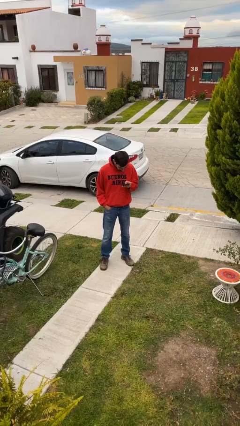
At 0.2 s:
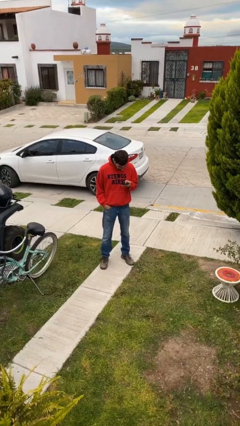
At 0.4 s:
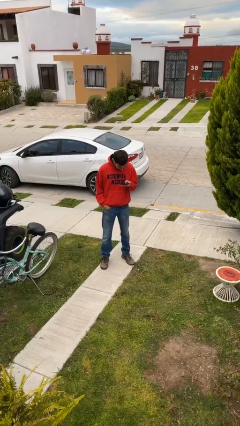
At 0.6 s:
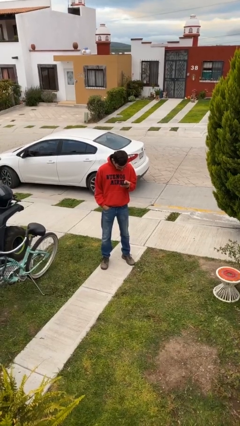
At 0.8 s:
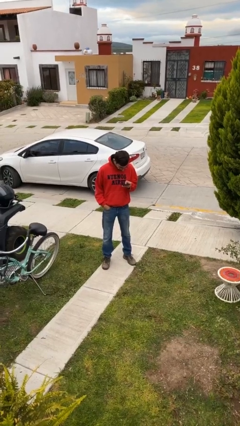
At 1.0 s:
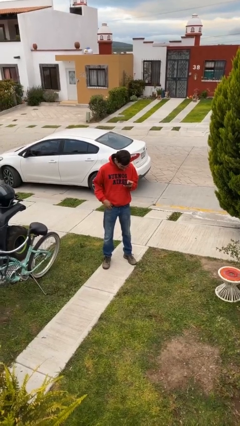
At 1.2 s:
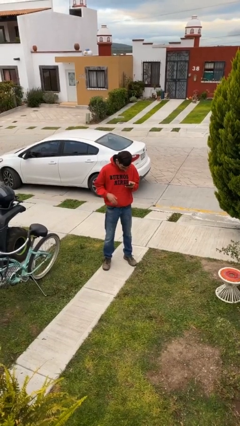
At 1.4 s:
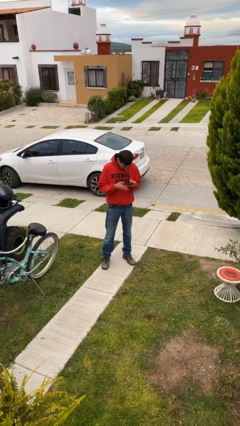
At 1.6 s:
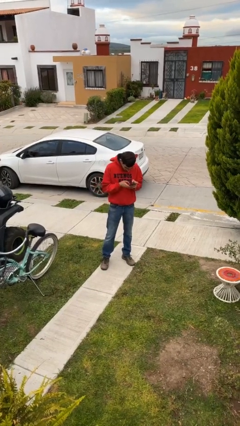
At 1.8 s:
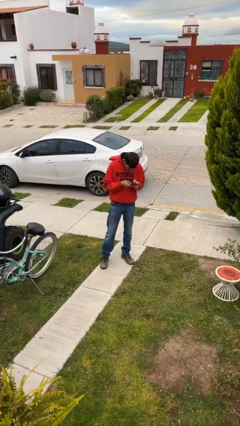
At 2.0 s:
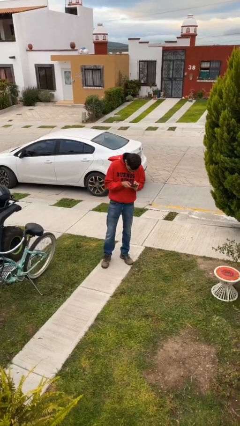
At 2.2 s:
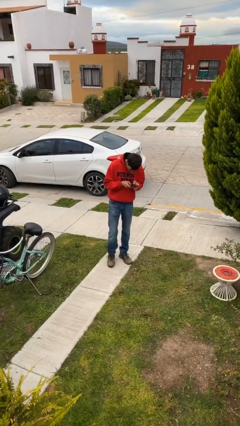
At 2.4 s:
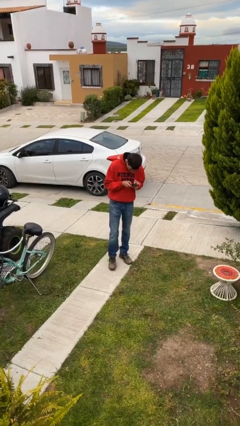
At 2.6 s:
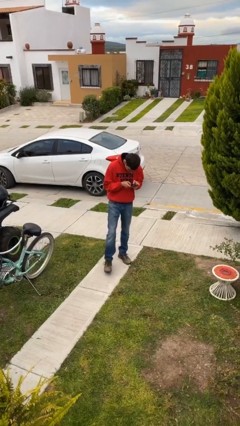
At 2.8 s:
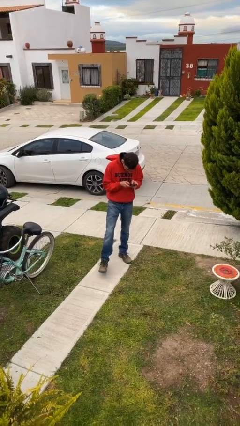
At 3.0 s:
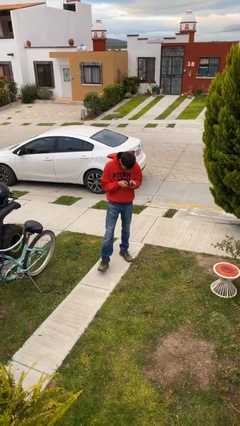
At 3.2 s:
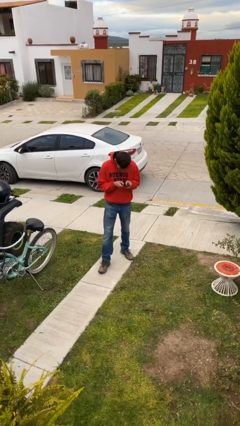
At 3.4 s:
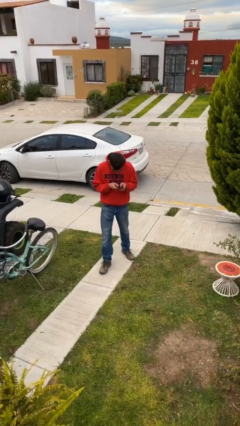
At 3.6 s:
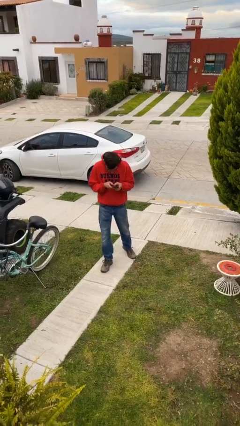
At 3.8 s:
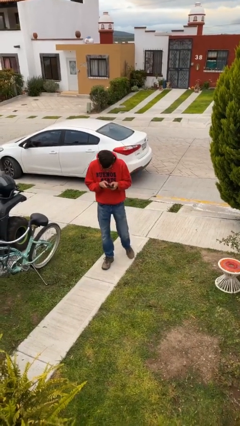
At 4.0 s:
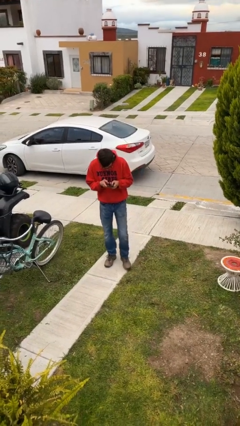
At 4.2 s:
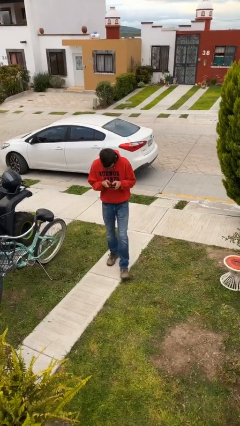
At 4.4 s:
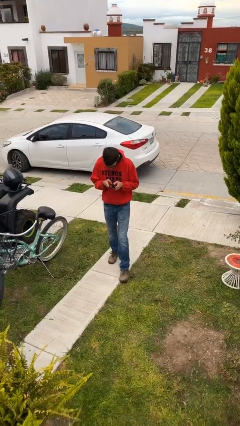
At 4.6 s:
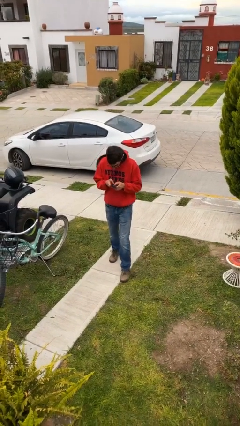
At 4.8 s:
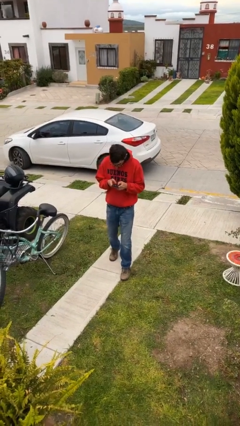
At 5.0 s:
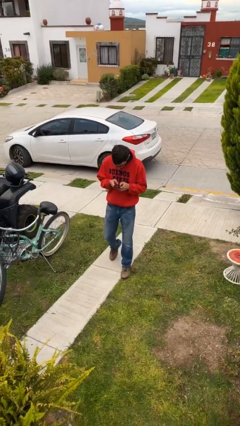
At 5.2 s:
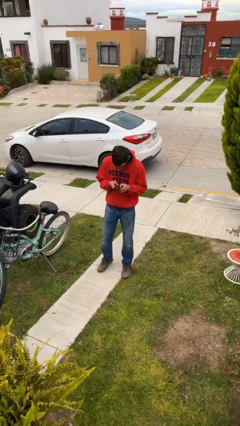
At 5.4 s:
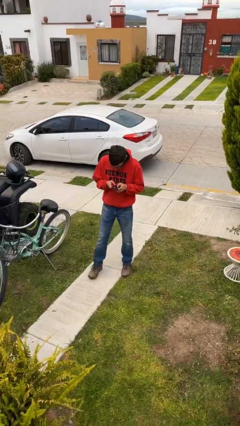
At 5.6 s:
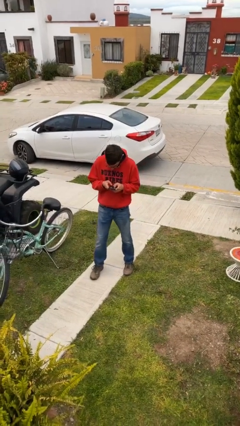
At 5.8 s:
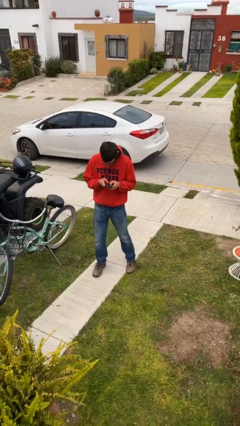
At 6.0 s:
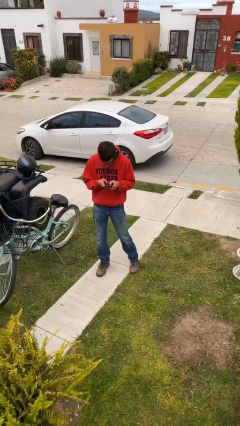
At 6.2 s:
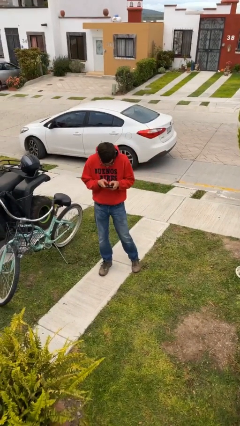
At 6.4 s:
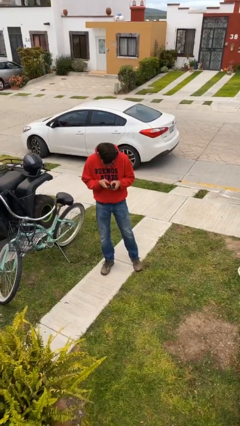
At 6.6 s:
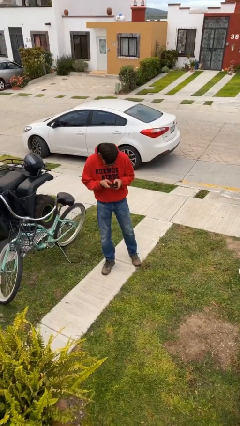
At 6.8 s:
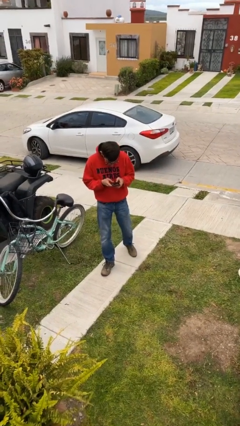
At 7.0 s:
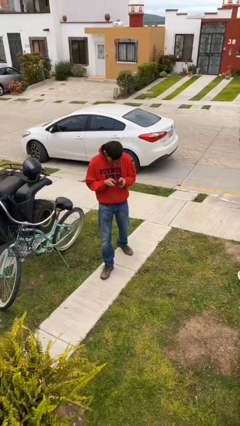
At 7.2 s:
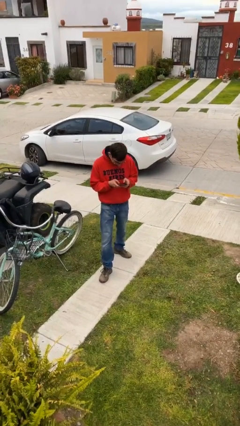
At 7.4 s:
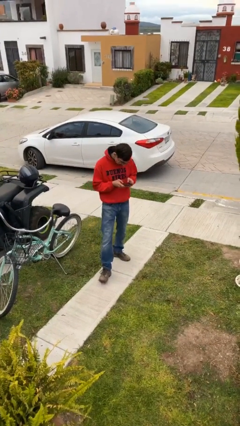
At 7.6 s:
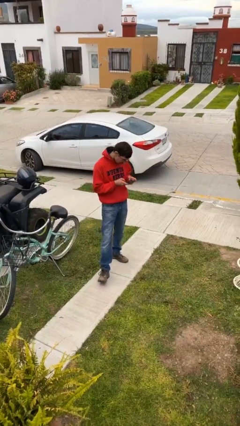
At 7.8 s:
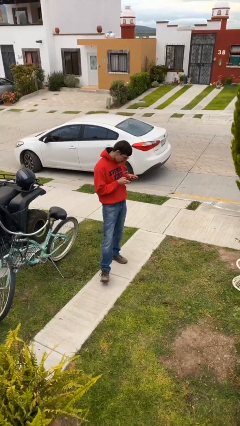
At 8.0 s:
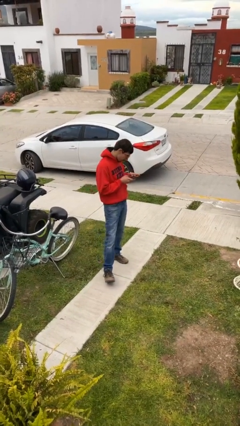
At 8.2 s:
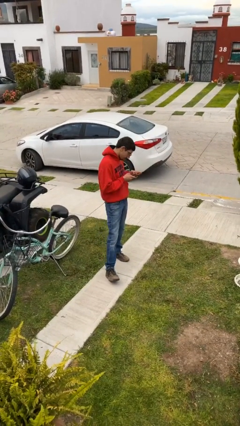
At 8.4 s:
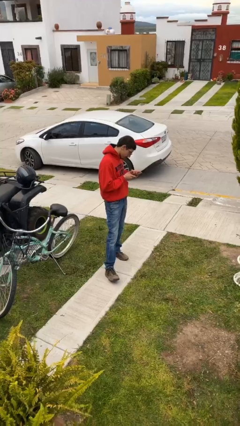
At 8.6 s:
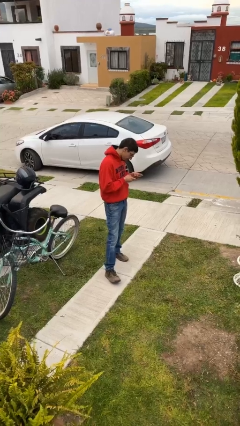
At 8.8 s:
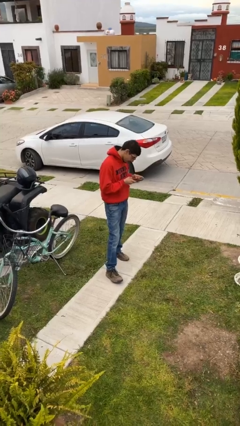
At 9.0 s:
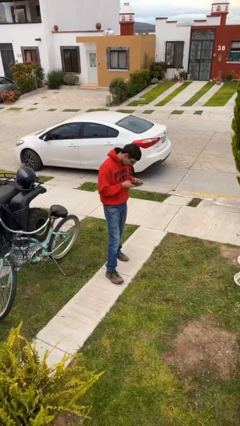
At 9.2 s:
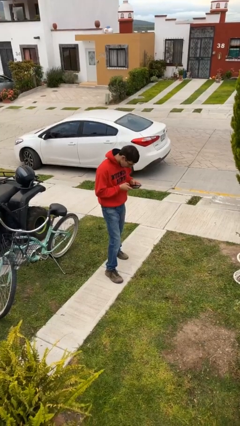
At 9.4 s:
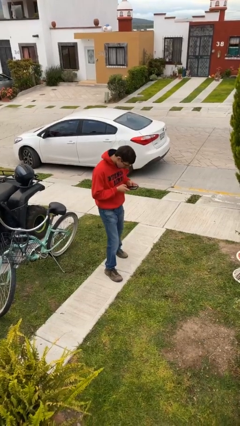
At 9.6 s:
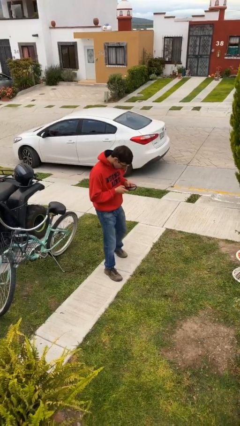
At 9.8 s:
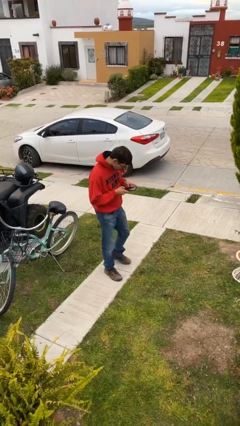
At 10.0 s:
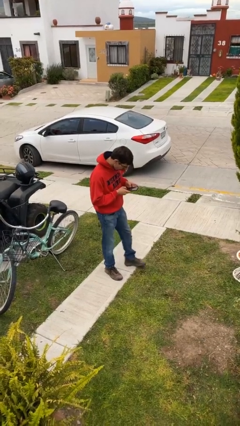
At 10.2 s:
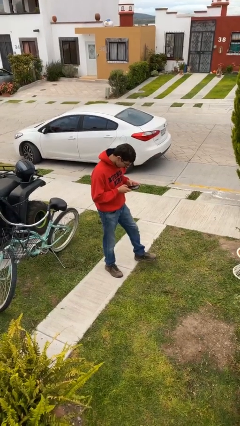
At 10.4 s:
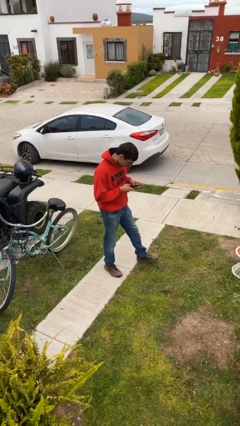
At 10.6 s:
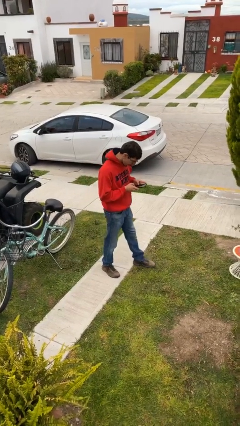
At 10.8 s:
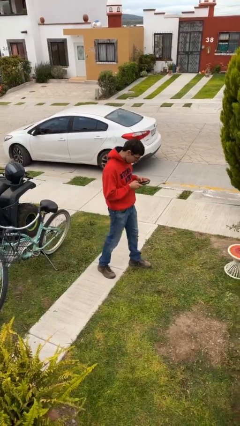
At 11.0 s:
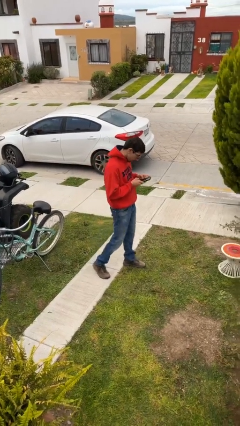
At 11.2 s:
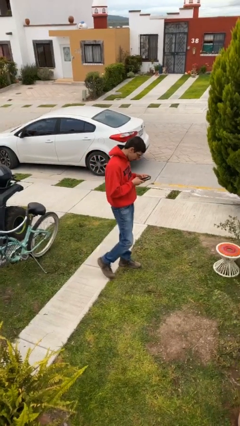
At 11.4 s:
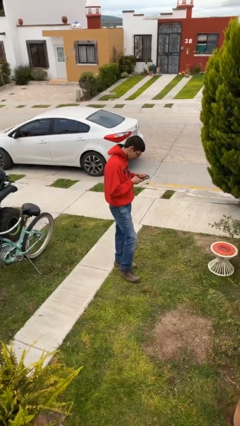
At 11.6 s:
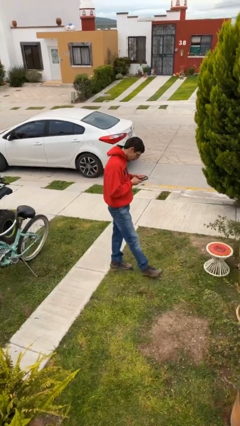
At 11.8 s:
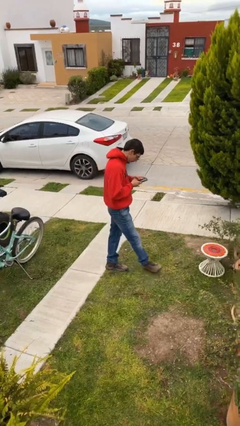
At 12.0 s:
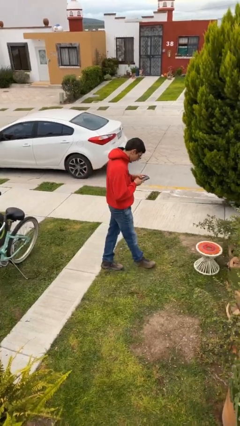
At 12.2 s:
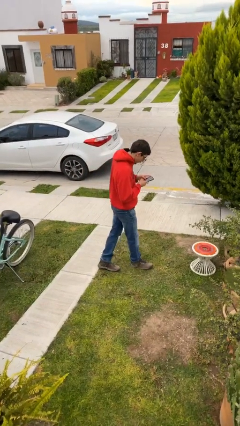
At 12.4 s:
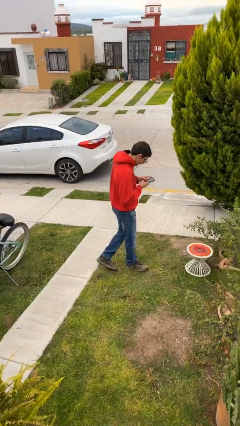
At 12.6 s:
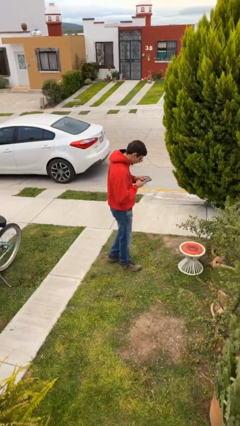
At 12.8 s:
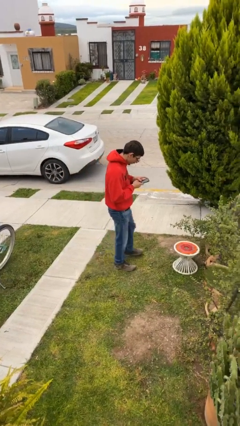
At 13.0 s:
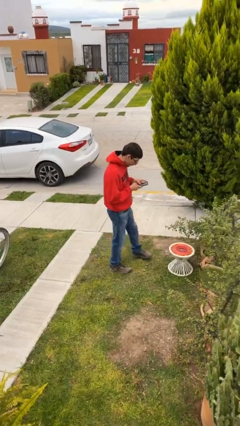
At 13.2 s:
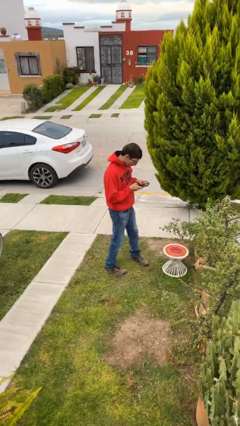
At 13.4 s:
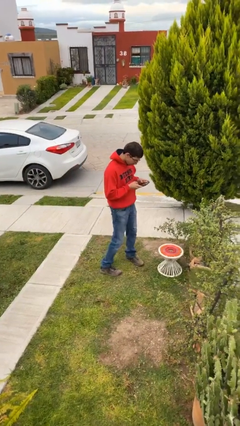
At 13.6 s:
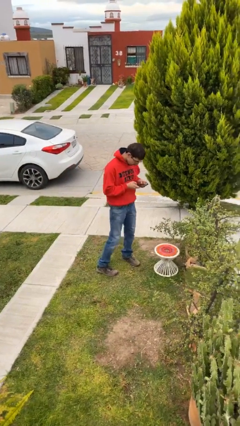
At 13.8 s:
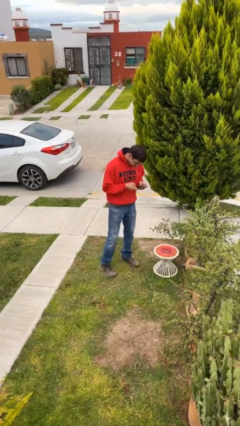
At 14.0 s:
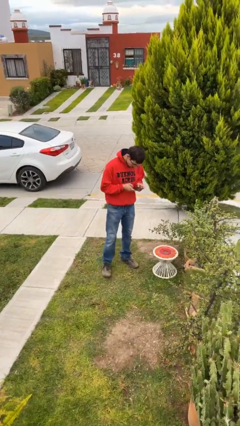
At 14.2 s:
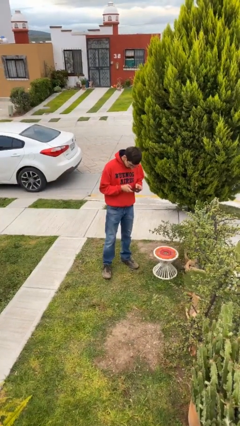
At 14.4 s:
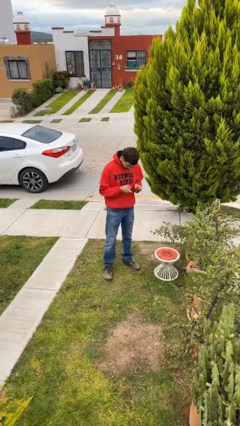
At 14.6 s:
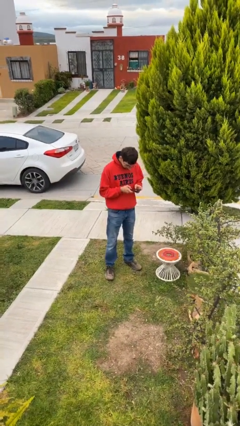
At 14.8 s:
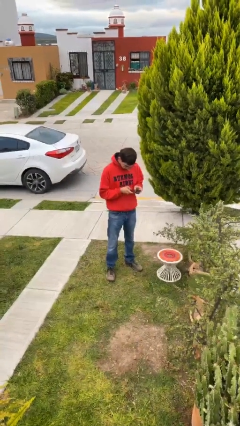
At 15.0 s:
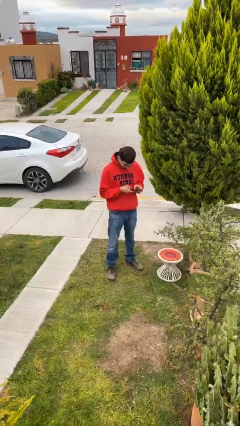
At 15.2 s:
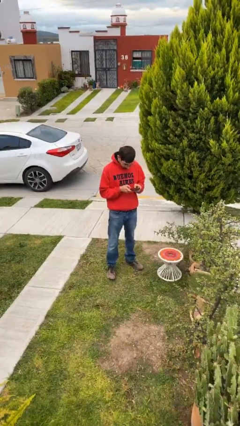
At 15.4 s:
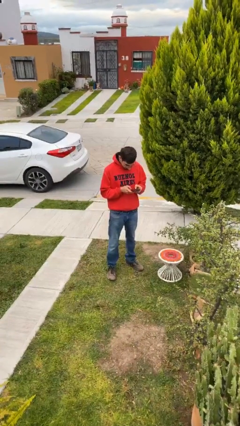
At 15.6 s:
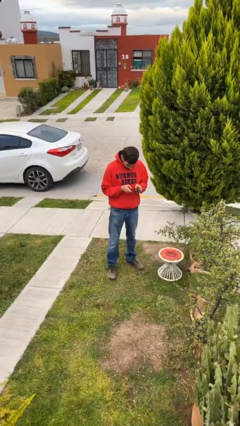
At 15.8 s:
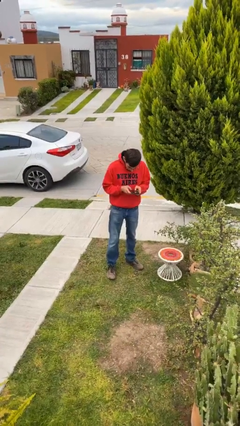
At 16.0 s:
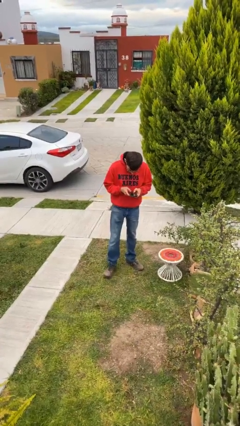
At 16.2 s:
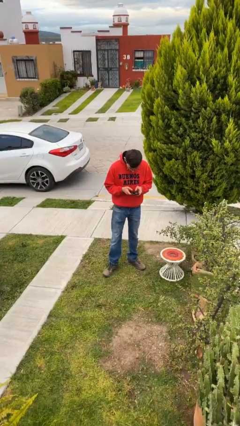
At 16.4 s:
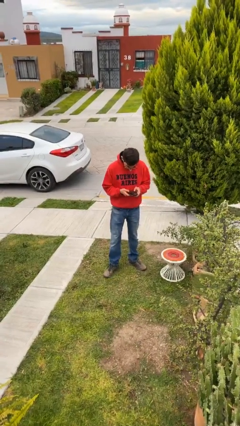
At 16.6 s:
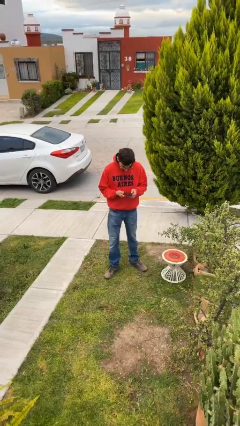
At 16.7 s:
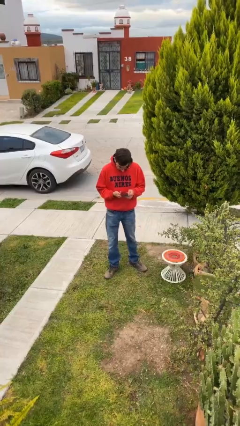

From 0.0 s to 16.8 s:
person texts on phone

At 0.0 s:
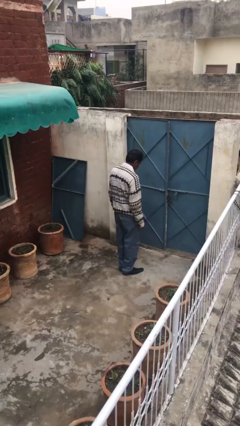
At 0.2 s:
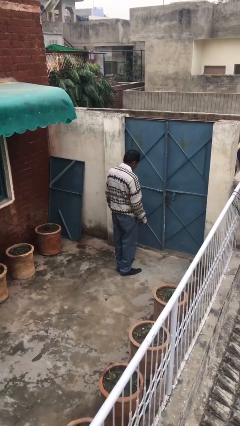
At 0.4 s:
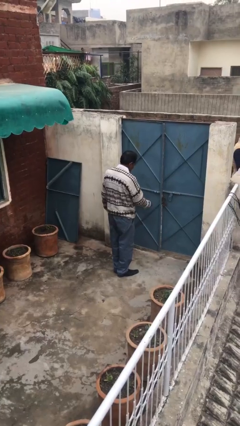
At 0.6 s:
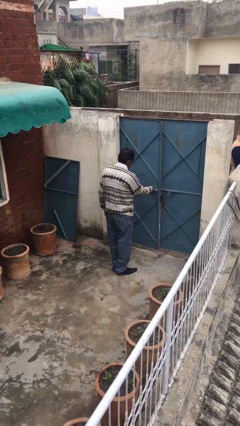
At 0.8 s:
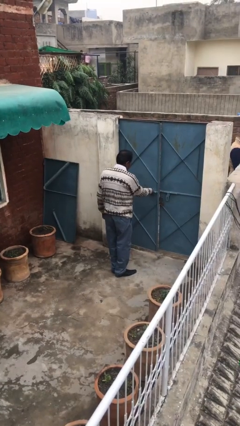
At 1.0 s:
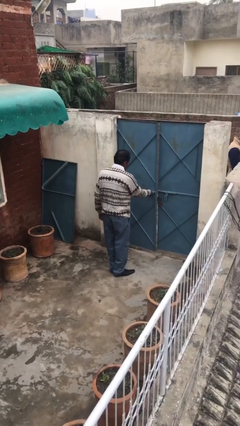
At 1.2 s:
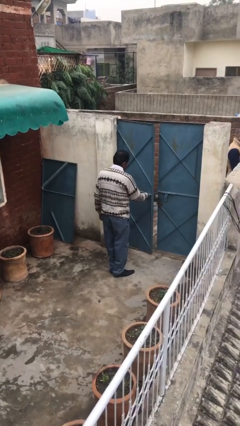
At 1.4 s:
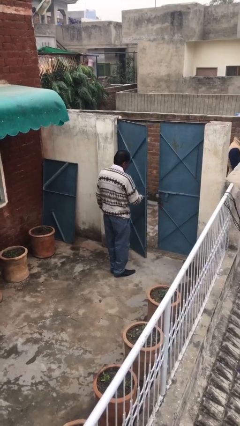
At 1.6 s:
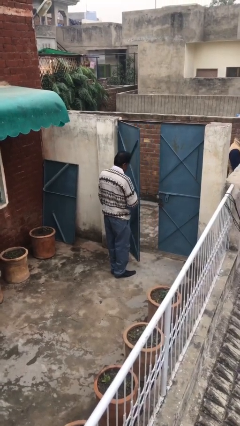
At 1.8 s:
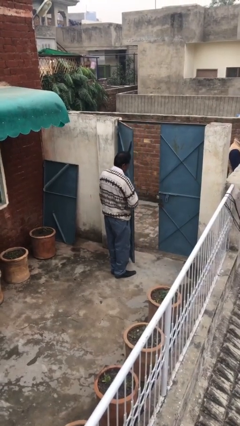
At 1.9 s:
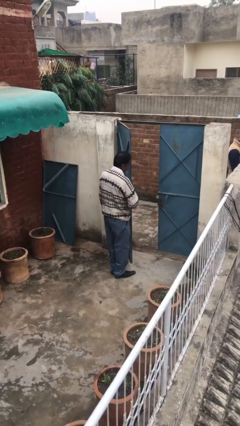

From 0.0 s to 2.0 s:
person opens facility door
